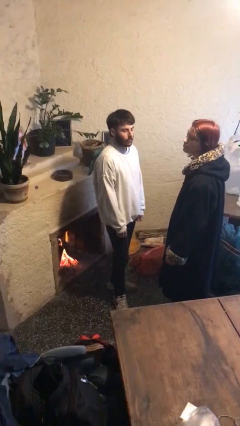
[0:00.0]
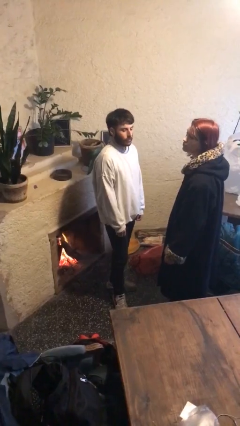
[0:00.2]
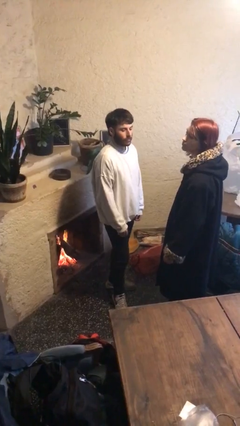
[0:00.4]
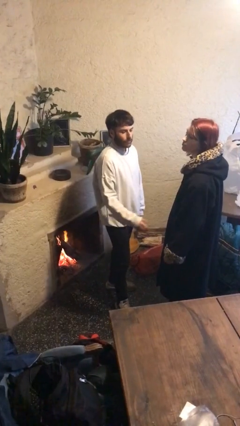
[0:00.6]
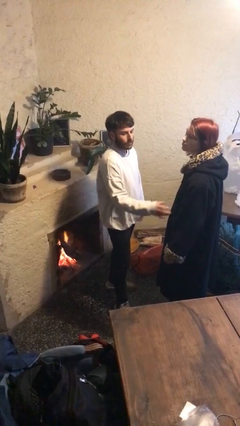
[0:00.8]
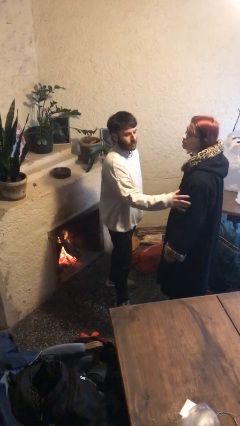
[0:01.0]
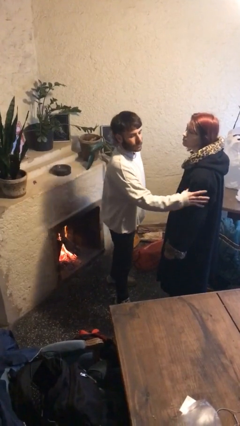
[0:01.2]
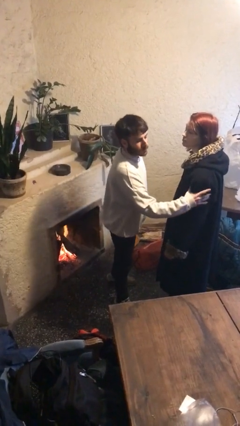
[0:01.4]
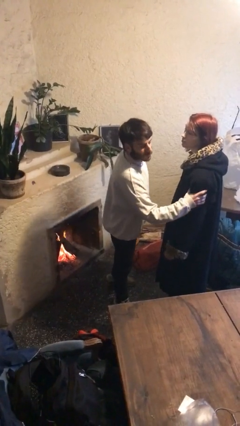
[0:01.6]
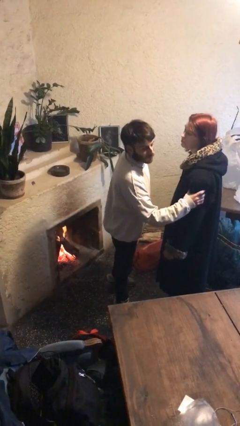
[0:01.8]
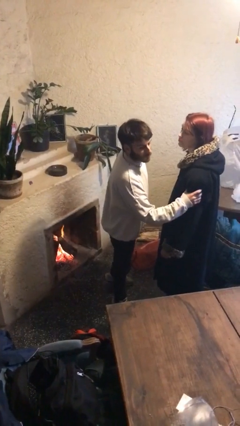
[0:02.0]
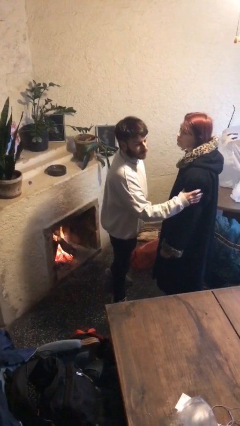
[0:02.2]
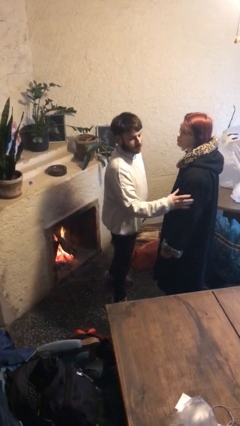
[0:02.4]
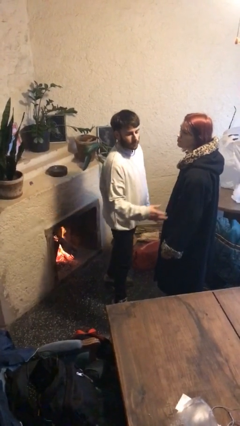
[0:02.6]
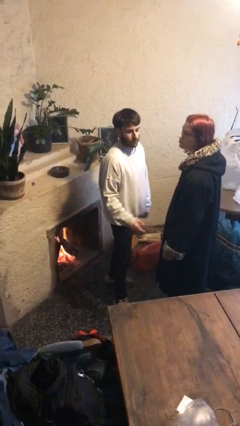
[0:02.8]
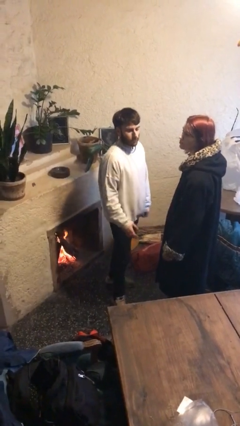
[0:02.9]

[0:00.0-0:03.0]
person grabs person by bicep

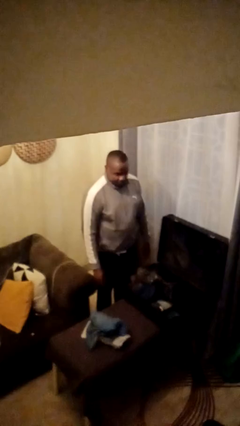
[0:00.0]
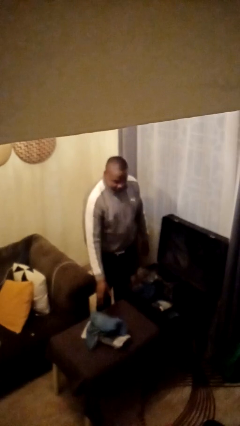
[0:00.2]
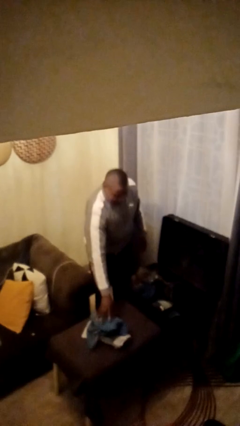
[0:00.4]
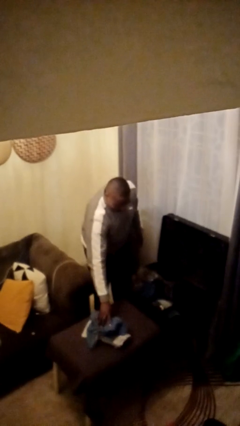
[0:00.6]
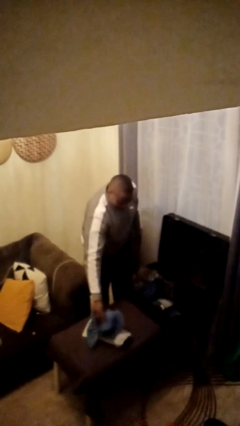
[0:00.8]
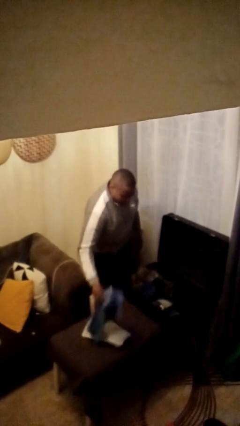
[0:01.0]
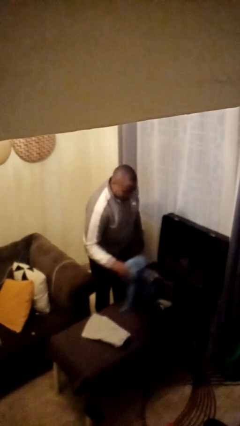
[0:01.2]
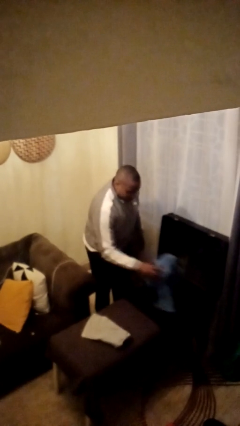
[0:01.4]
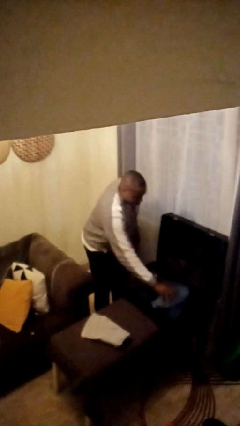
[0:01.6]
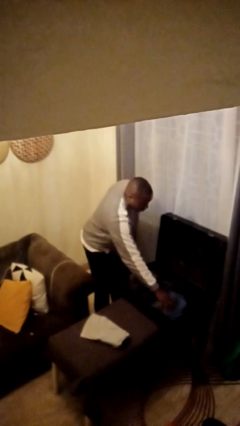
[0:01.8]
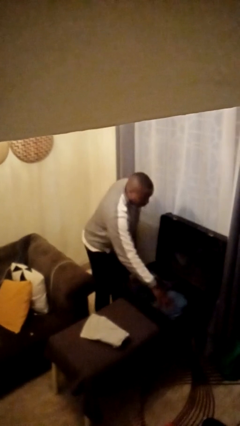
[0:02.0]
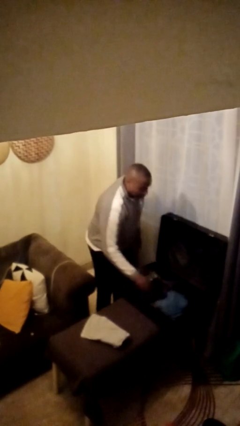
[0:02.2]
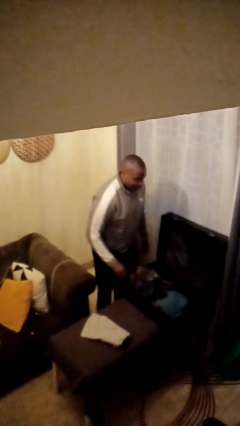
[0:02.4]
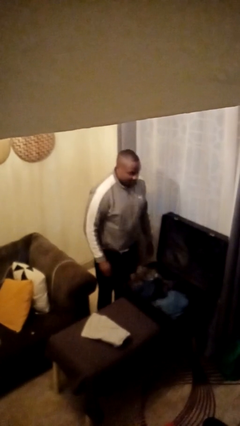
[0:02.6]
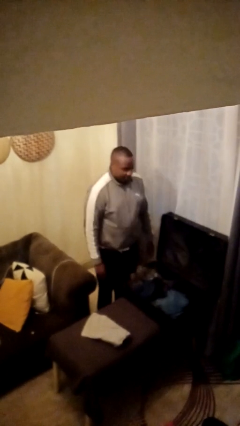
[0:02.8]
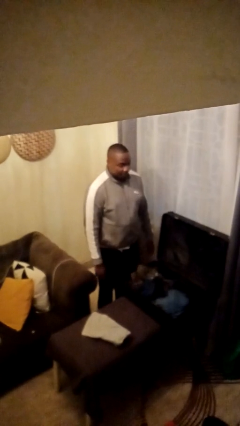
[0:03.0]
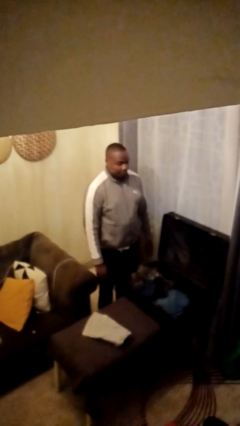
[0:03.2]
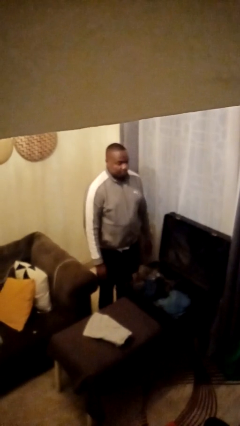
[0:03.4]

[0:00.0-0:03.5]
person loads clothes into suitcase

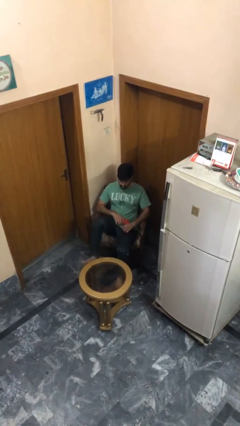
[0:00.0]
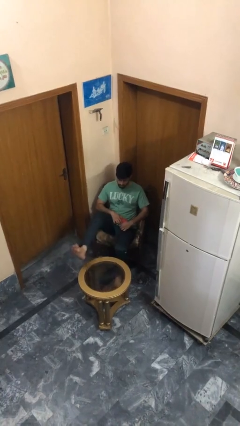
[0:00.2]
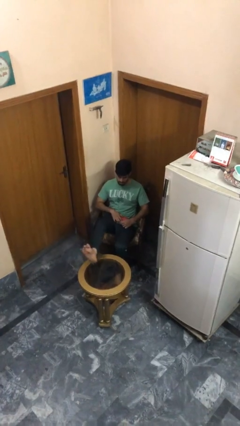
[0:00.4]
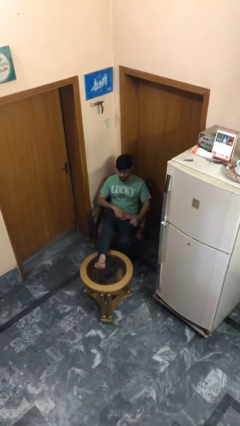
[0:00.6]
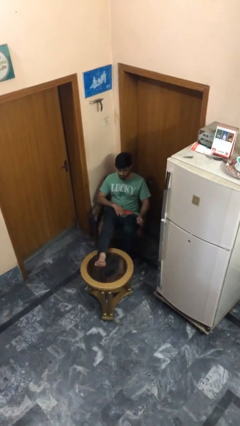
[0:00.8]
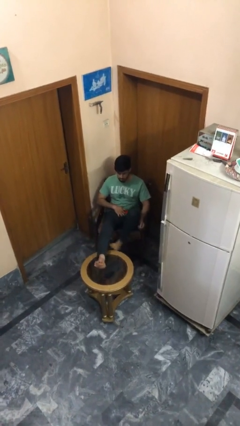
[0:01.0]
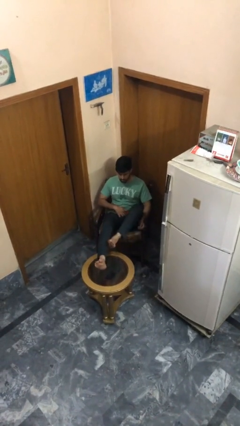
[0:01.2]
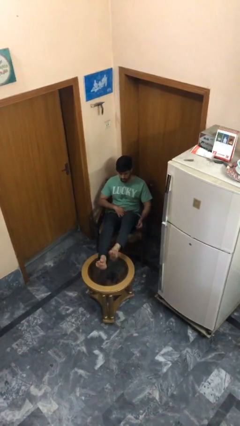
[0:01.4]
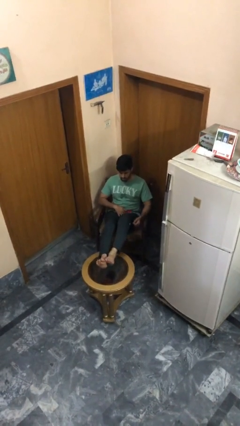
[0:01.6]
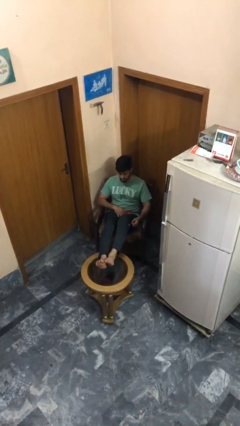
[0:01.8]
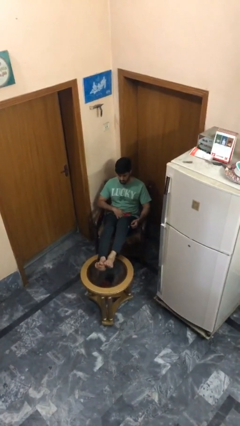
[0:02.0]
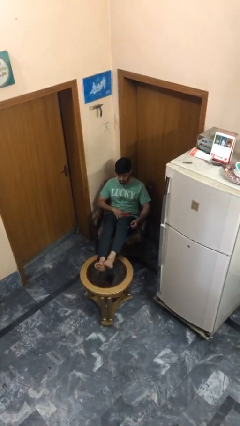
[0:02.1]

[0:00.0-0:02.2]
person puts feet up

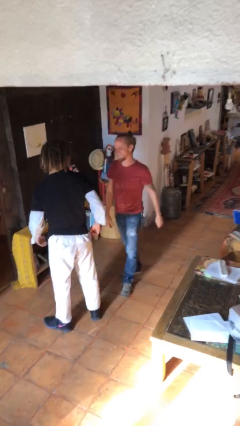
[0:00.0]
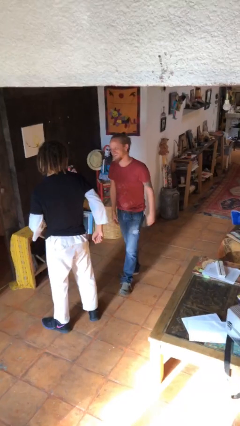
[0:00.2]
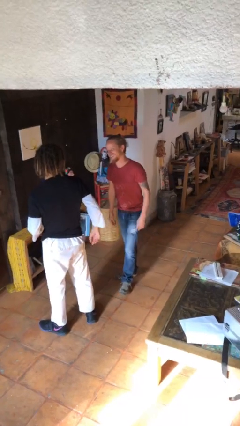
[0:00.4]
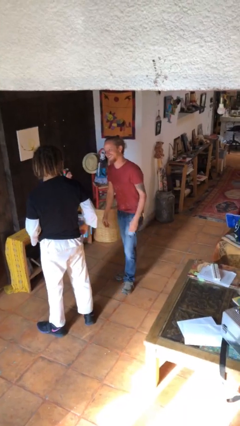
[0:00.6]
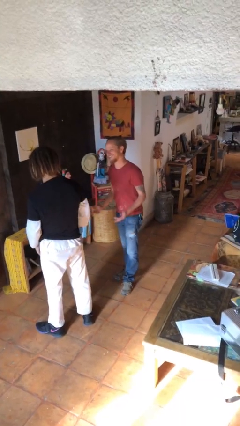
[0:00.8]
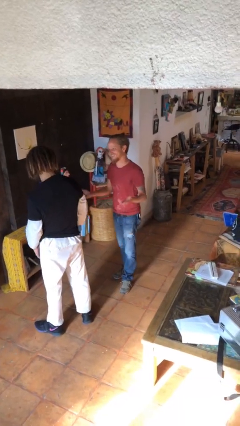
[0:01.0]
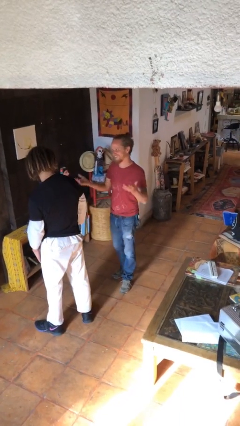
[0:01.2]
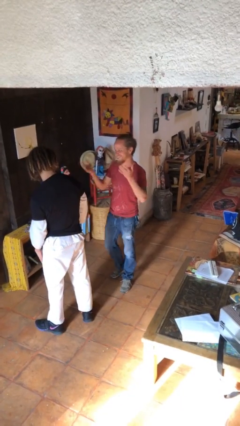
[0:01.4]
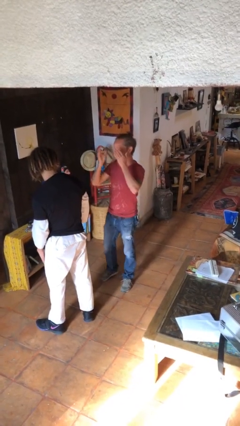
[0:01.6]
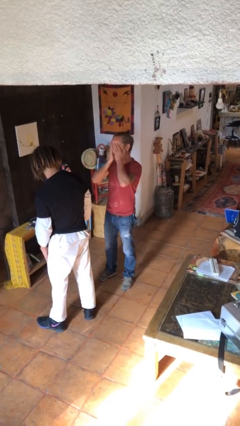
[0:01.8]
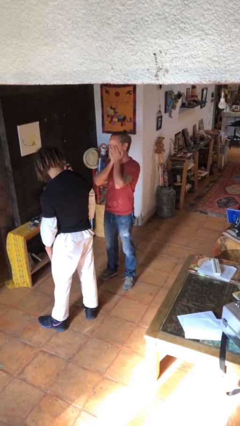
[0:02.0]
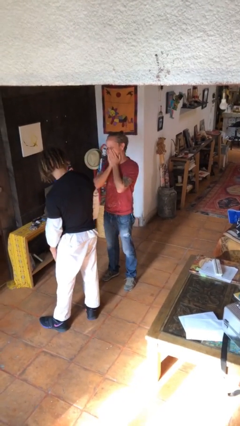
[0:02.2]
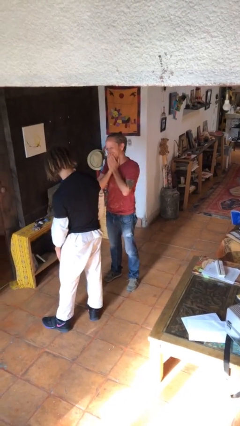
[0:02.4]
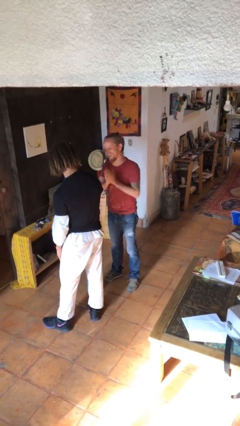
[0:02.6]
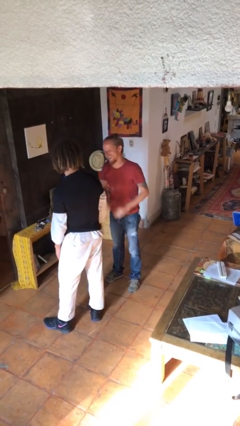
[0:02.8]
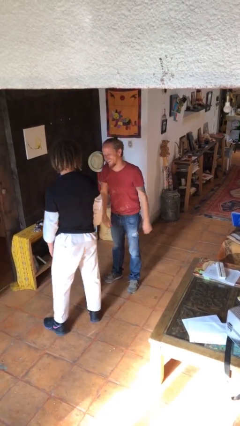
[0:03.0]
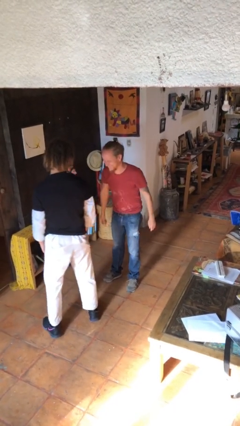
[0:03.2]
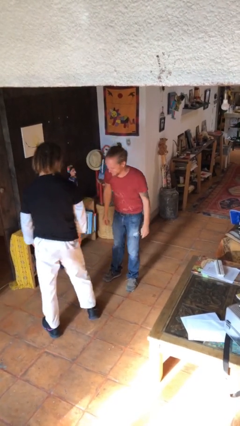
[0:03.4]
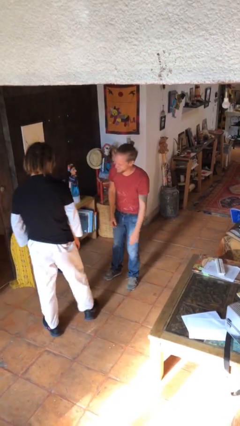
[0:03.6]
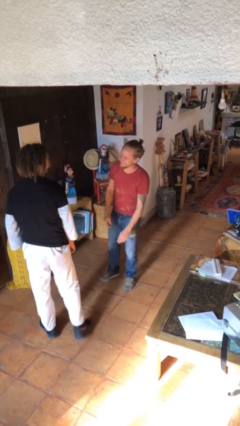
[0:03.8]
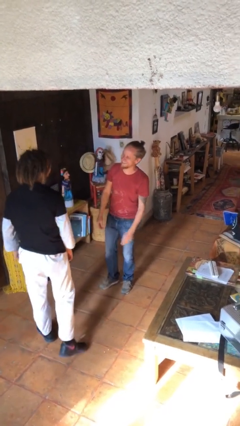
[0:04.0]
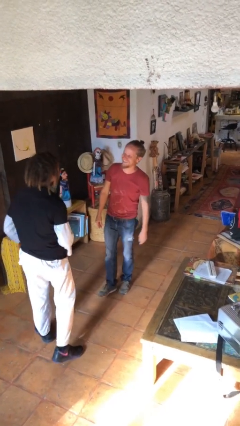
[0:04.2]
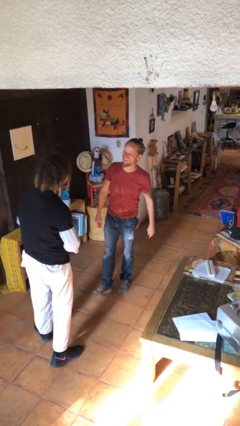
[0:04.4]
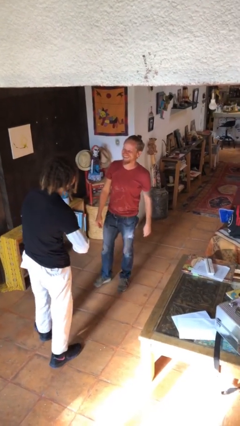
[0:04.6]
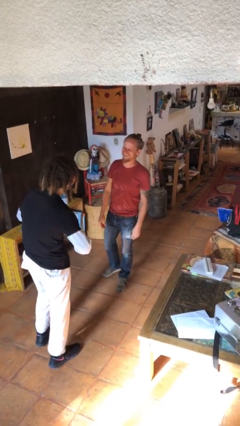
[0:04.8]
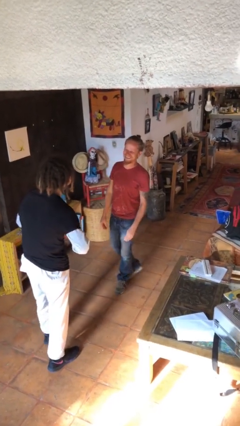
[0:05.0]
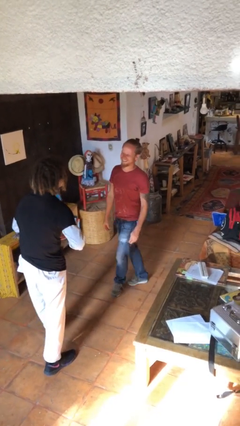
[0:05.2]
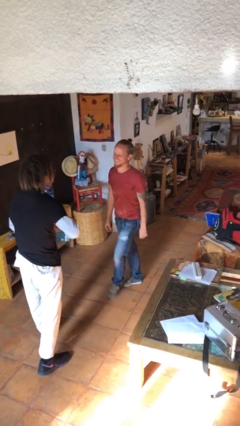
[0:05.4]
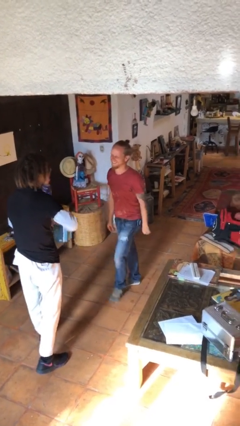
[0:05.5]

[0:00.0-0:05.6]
person talks to person

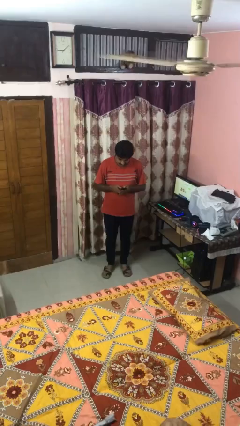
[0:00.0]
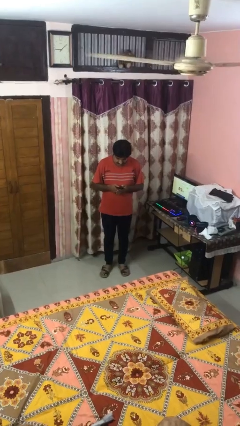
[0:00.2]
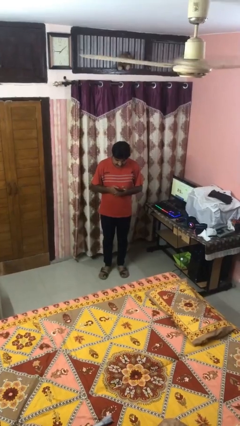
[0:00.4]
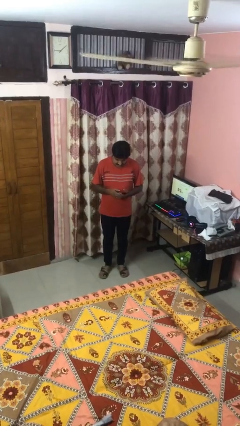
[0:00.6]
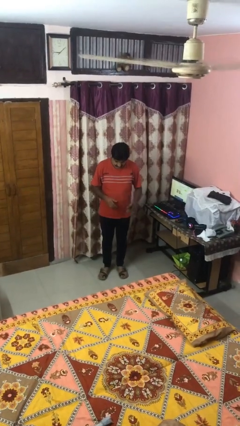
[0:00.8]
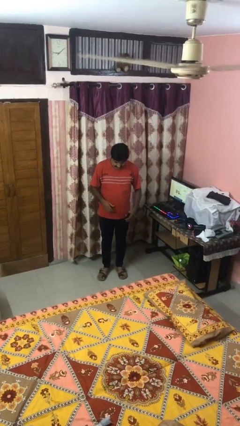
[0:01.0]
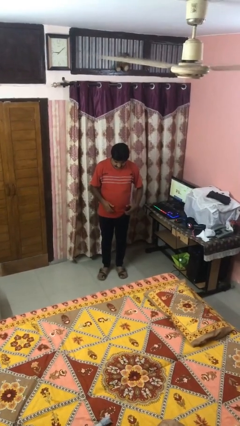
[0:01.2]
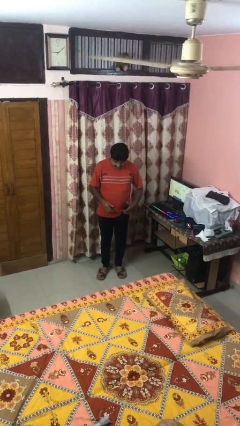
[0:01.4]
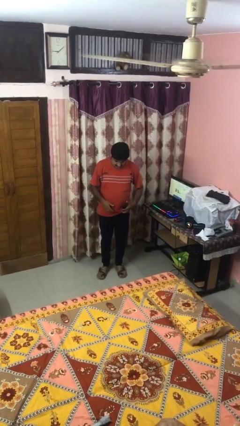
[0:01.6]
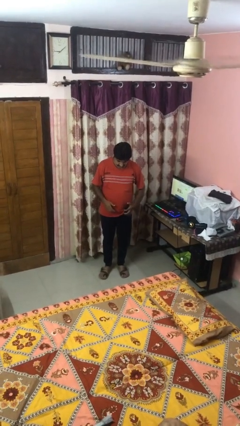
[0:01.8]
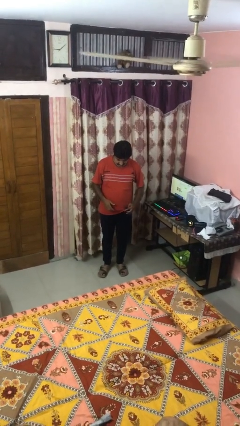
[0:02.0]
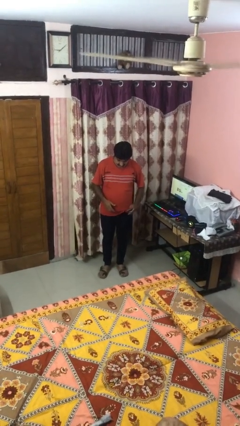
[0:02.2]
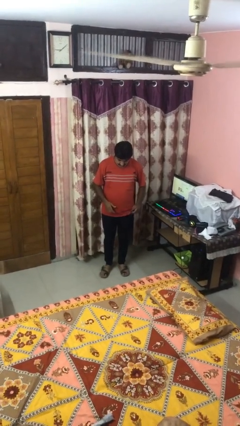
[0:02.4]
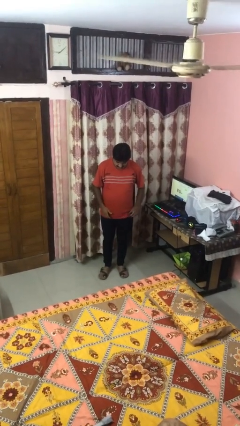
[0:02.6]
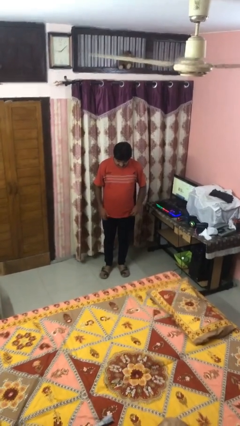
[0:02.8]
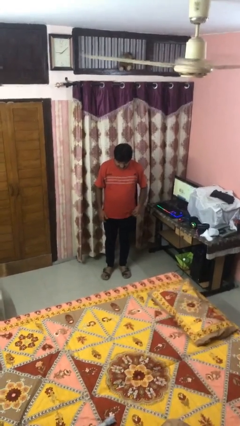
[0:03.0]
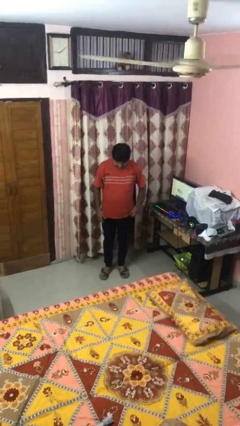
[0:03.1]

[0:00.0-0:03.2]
person puts phone into pocket

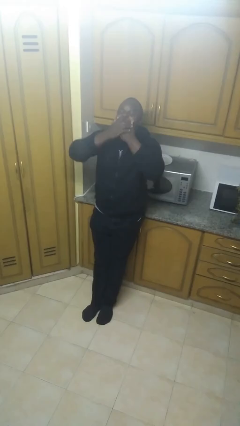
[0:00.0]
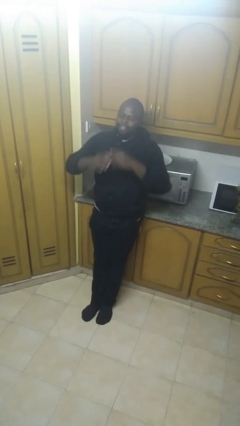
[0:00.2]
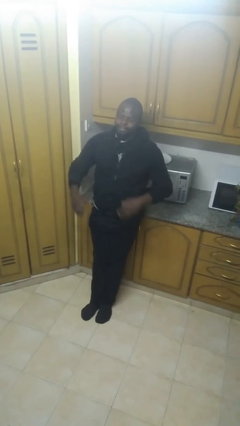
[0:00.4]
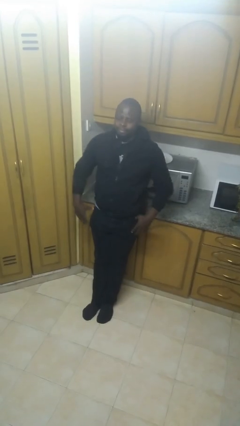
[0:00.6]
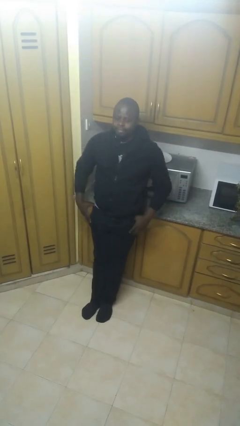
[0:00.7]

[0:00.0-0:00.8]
person yawns
